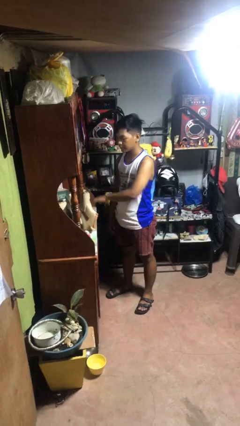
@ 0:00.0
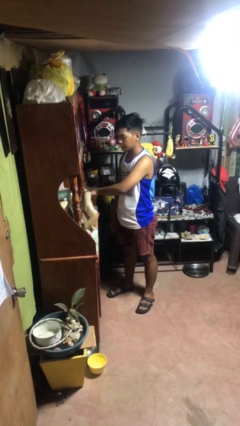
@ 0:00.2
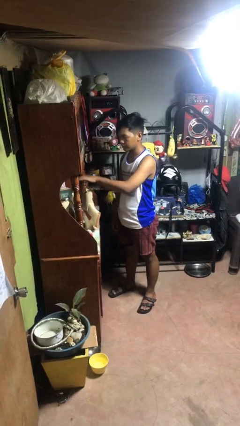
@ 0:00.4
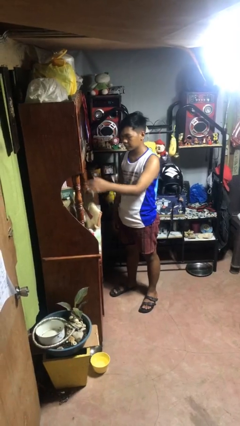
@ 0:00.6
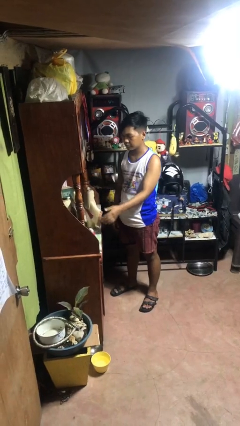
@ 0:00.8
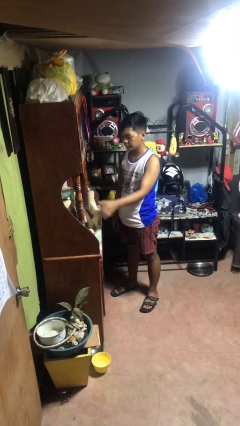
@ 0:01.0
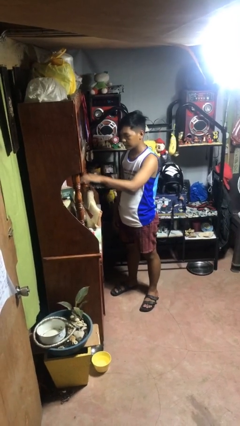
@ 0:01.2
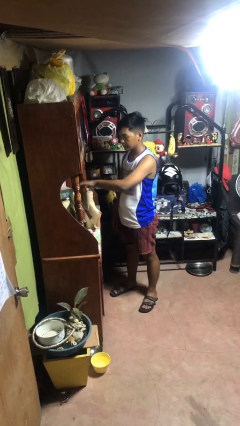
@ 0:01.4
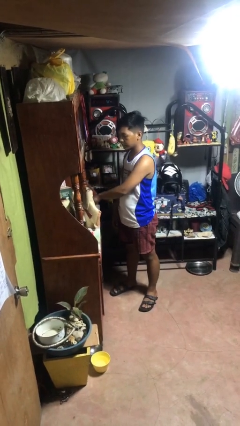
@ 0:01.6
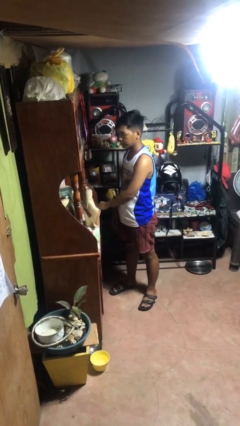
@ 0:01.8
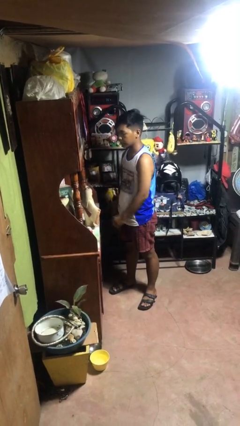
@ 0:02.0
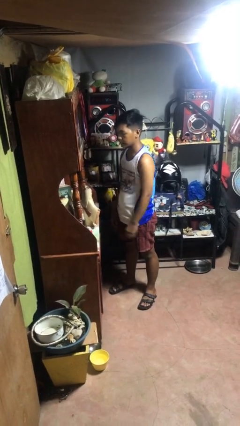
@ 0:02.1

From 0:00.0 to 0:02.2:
person waves hand over object

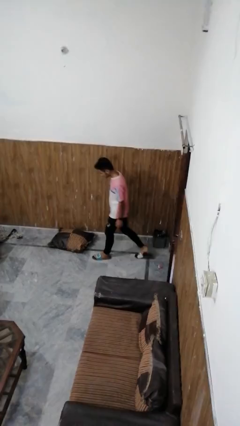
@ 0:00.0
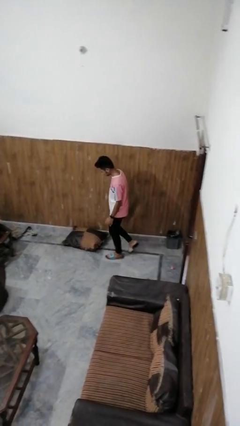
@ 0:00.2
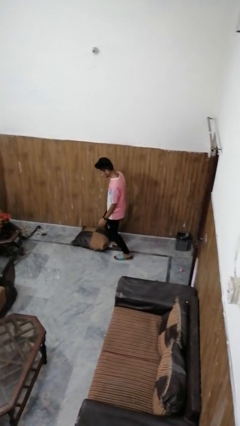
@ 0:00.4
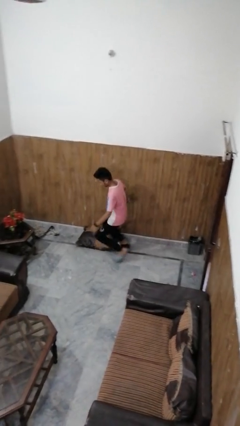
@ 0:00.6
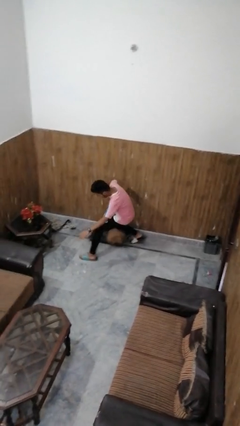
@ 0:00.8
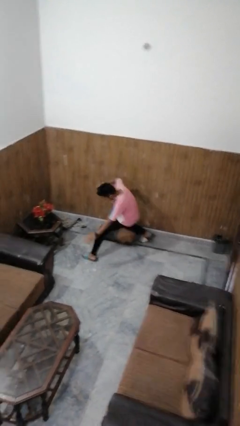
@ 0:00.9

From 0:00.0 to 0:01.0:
person trips on object on floor

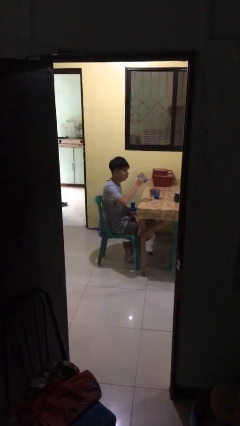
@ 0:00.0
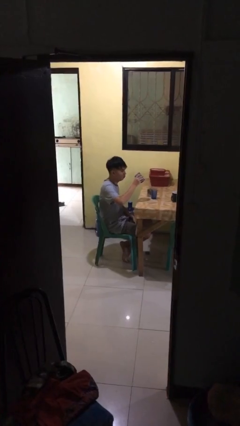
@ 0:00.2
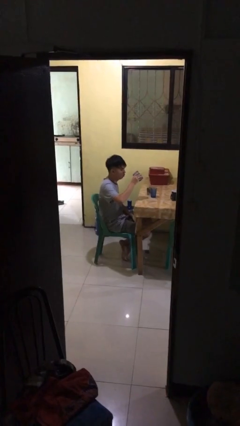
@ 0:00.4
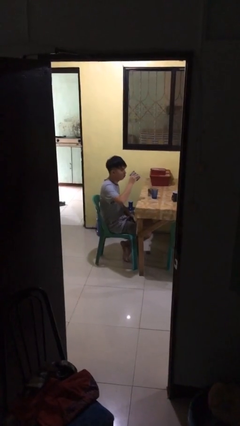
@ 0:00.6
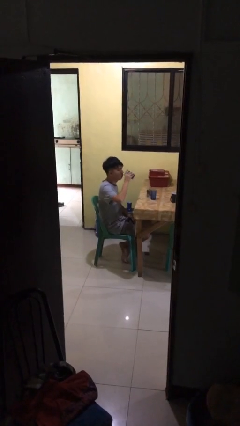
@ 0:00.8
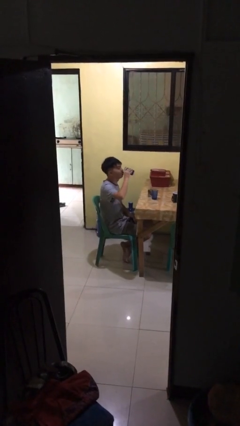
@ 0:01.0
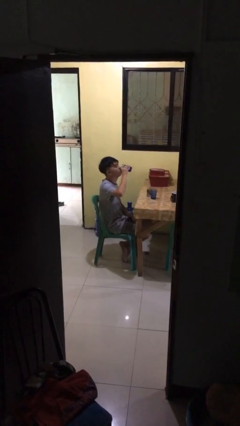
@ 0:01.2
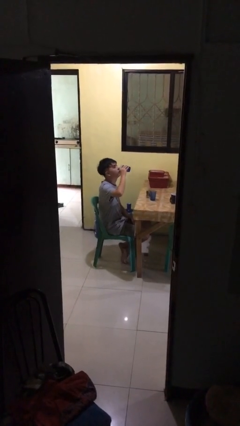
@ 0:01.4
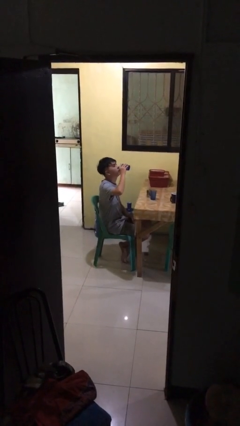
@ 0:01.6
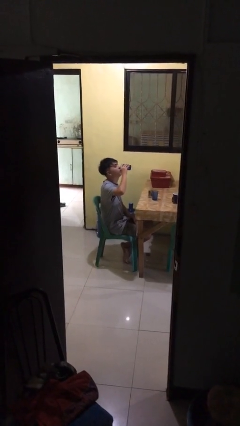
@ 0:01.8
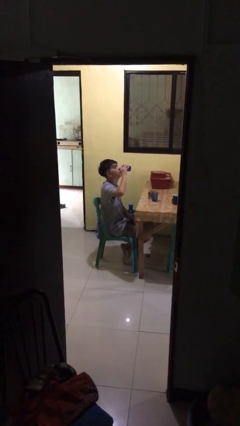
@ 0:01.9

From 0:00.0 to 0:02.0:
person drinks from shotglass

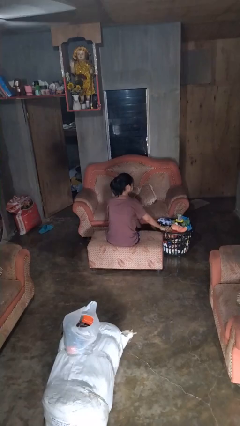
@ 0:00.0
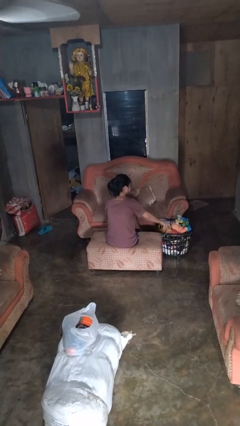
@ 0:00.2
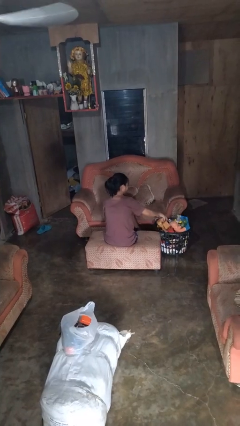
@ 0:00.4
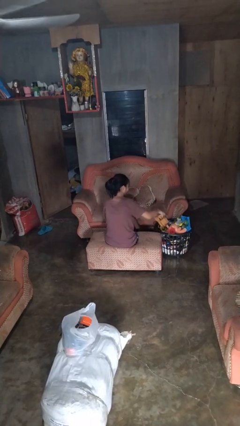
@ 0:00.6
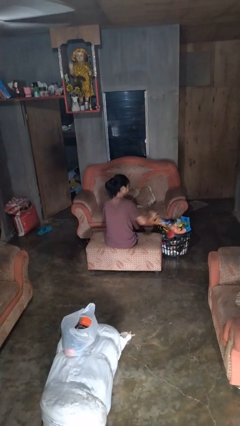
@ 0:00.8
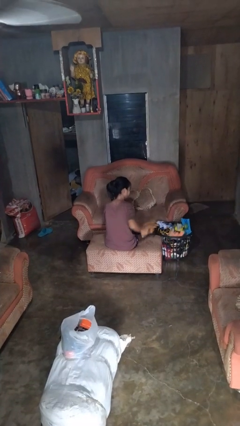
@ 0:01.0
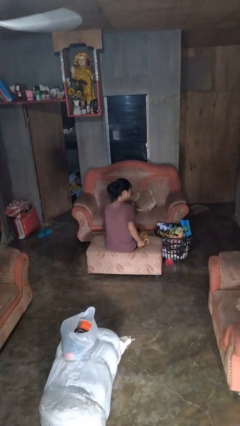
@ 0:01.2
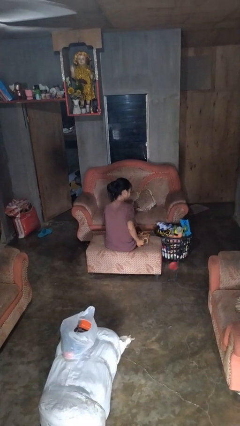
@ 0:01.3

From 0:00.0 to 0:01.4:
person takes object from basket

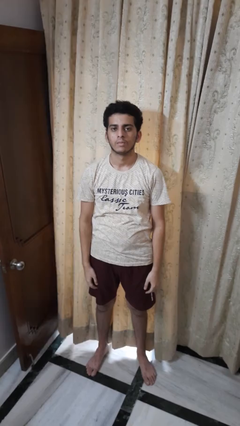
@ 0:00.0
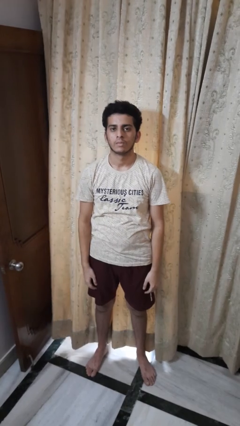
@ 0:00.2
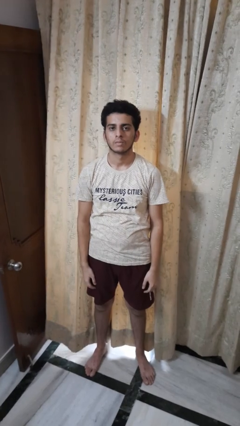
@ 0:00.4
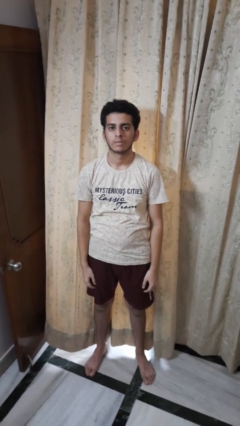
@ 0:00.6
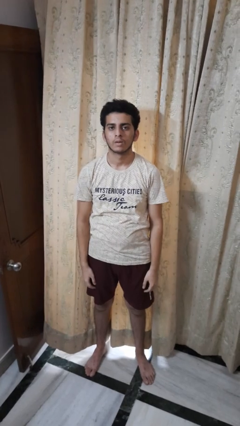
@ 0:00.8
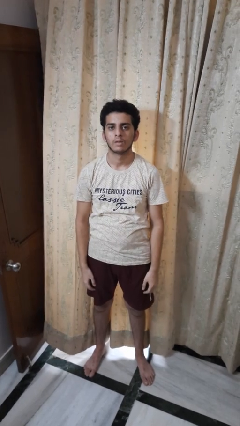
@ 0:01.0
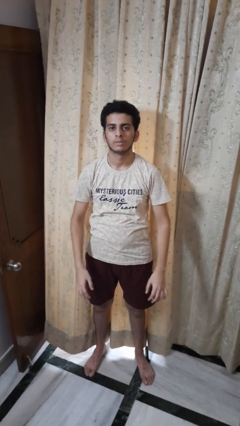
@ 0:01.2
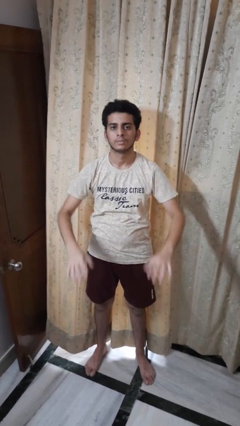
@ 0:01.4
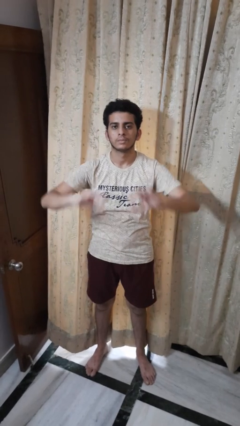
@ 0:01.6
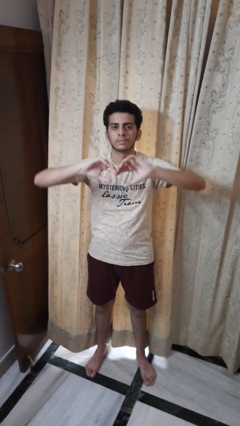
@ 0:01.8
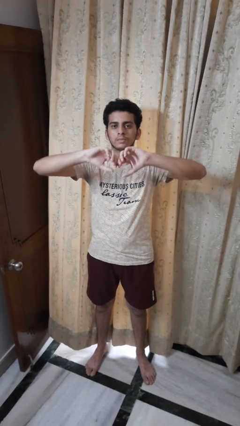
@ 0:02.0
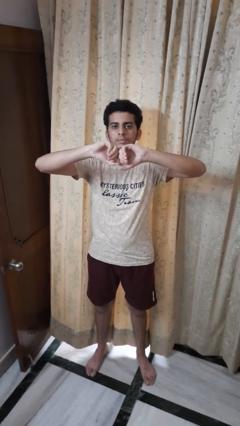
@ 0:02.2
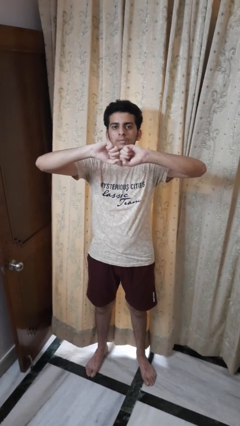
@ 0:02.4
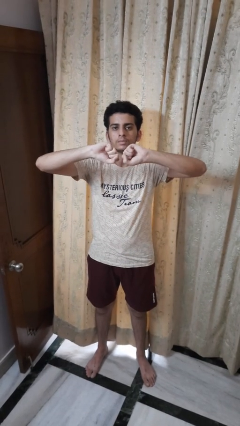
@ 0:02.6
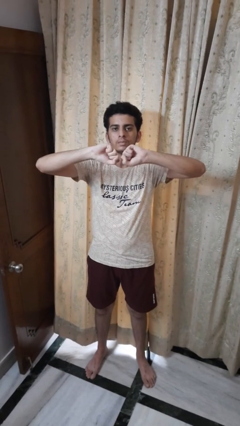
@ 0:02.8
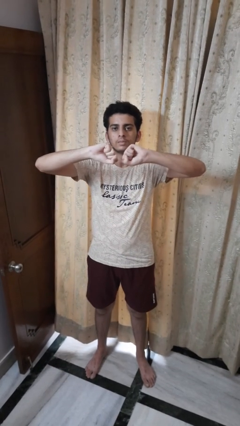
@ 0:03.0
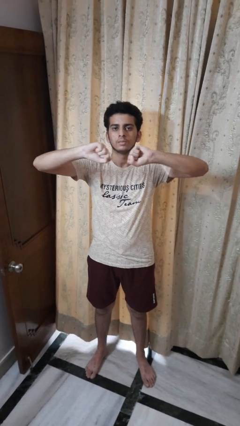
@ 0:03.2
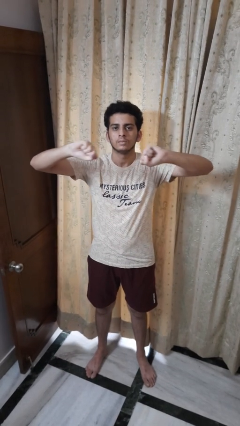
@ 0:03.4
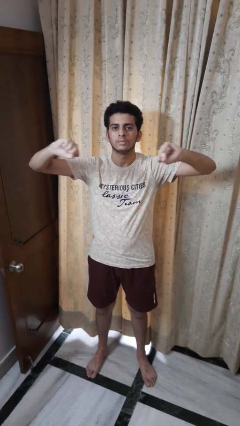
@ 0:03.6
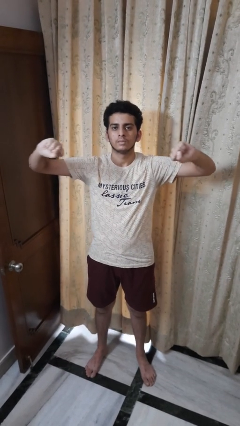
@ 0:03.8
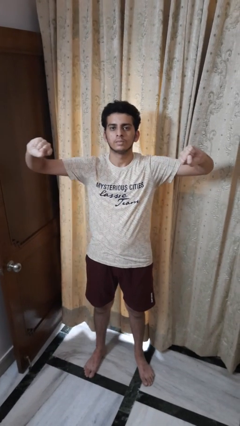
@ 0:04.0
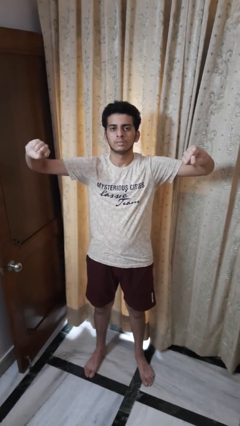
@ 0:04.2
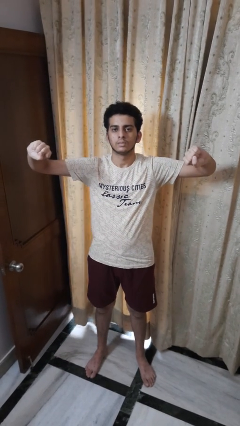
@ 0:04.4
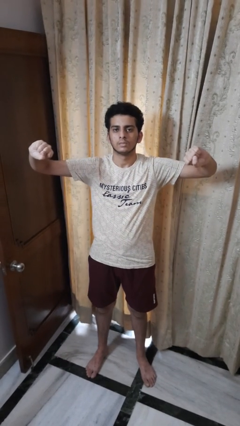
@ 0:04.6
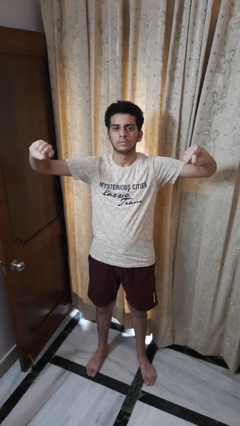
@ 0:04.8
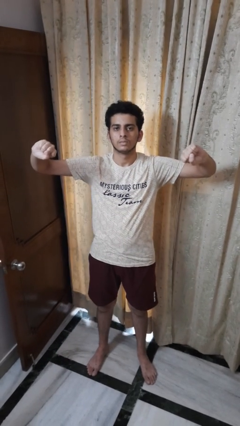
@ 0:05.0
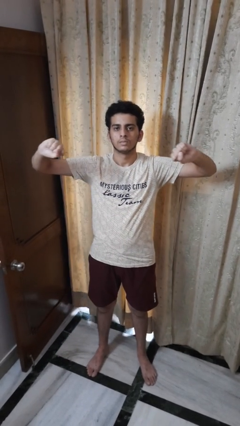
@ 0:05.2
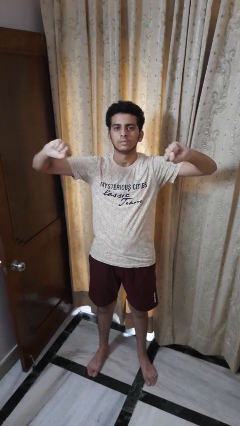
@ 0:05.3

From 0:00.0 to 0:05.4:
person gestures zoom in

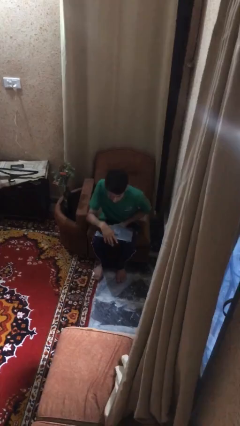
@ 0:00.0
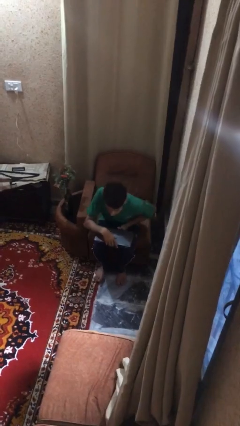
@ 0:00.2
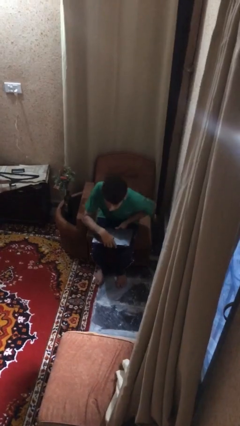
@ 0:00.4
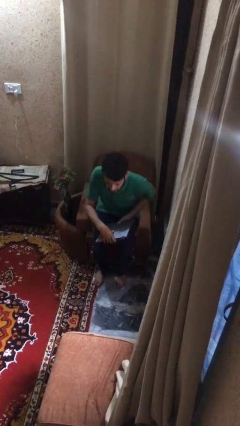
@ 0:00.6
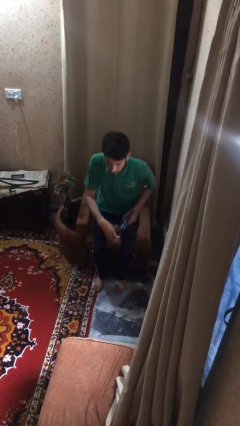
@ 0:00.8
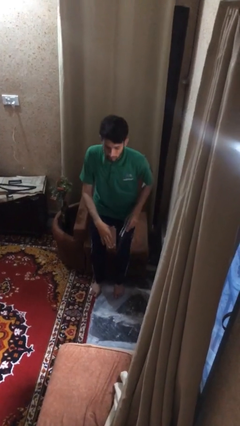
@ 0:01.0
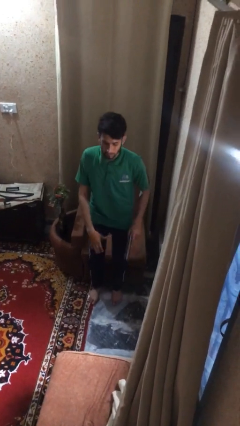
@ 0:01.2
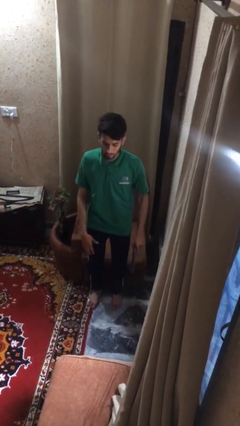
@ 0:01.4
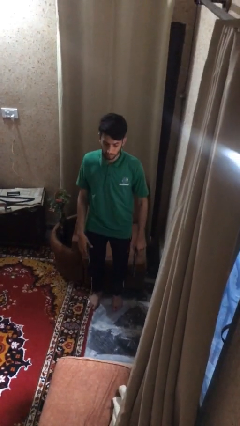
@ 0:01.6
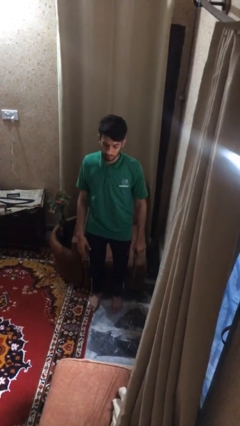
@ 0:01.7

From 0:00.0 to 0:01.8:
person stands up

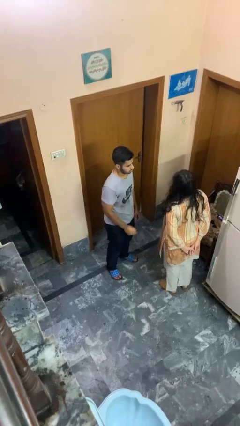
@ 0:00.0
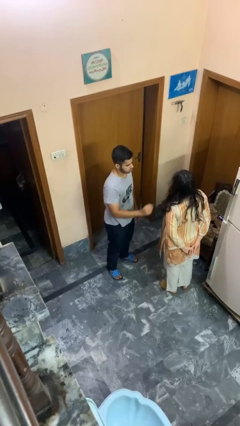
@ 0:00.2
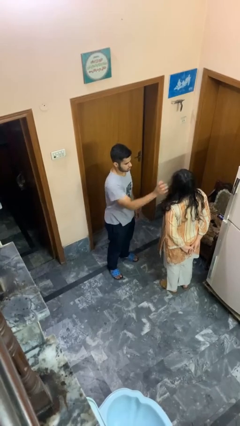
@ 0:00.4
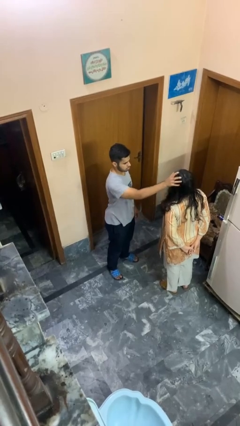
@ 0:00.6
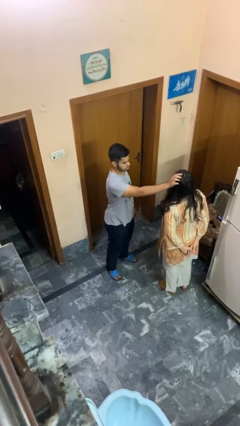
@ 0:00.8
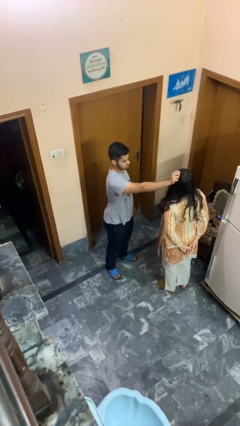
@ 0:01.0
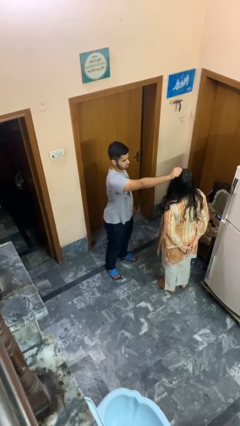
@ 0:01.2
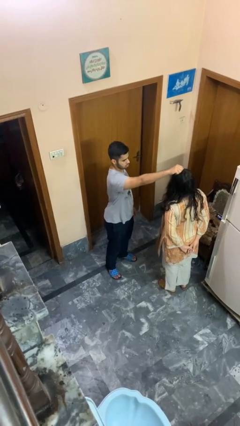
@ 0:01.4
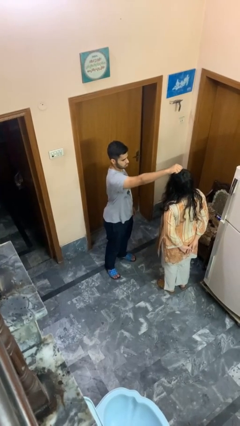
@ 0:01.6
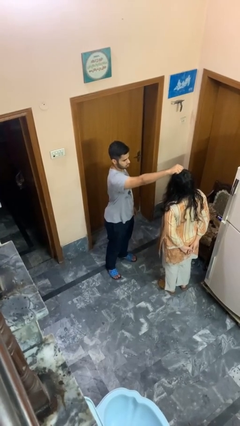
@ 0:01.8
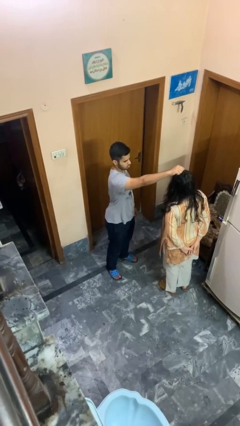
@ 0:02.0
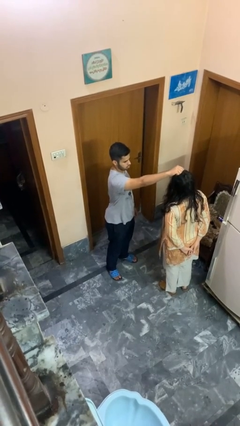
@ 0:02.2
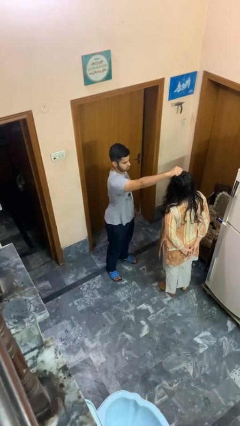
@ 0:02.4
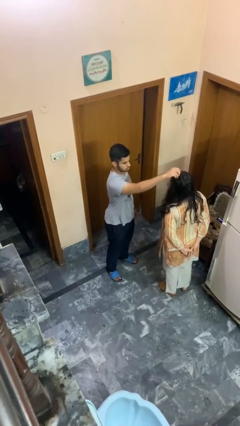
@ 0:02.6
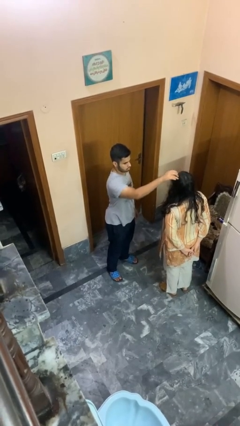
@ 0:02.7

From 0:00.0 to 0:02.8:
person grabs person by hair

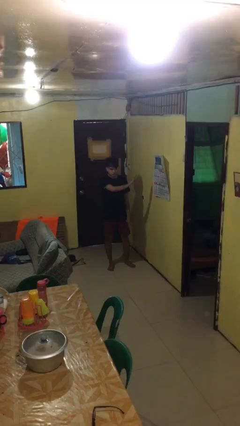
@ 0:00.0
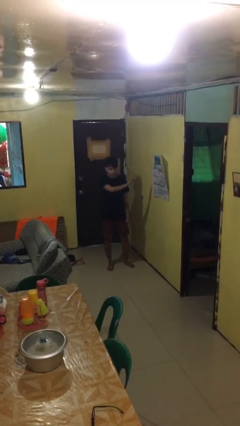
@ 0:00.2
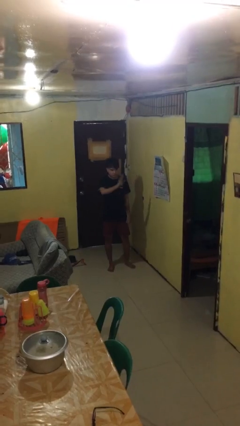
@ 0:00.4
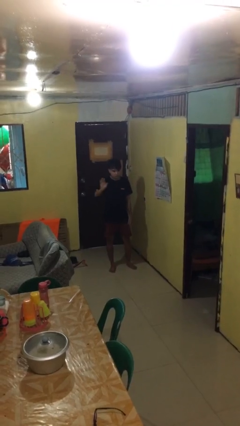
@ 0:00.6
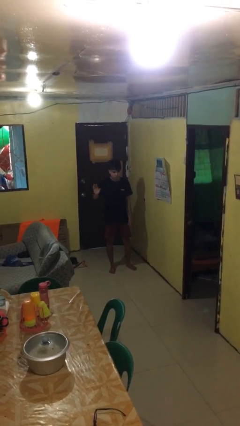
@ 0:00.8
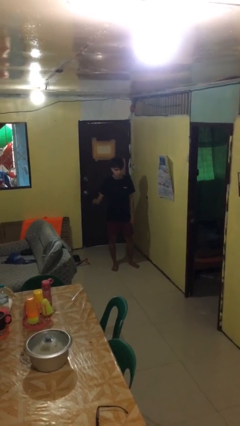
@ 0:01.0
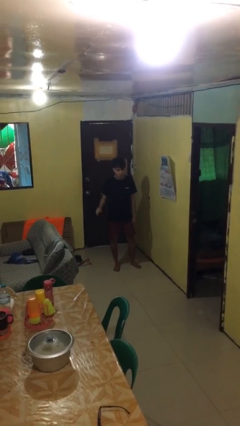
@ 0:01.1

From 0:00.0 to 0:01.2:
person gestures swipe right
